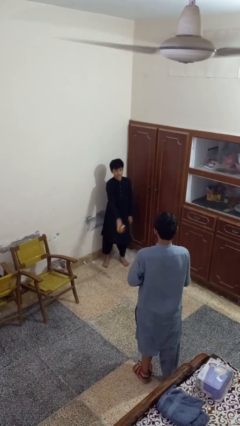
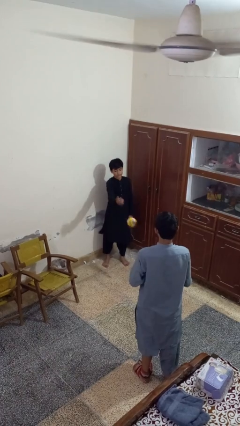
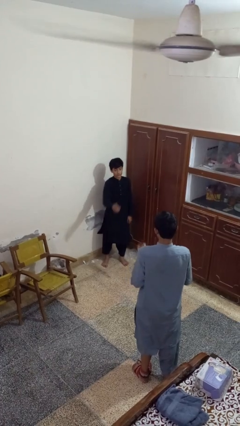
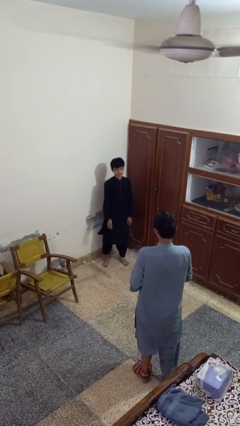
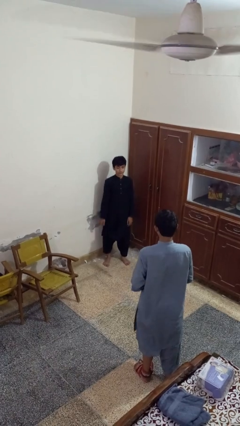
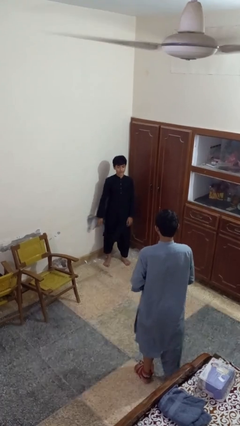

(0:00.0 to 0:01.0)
person throws object to person

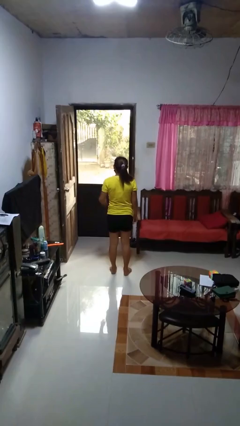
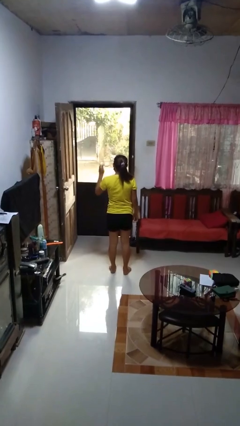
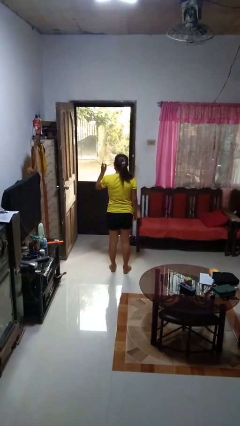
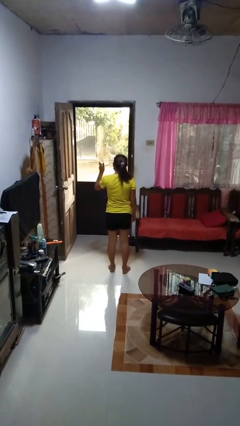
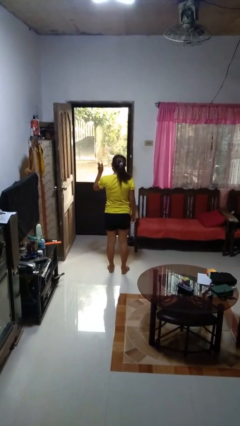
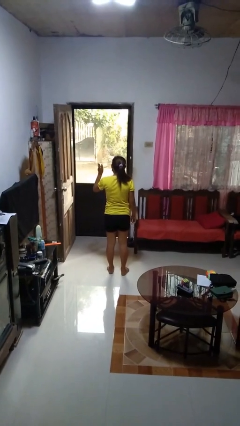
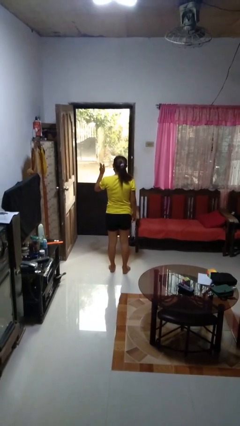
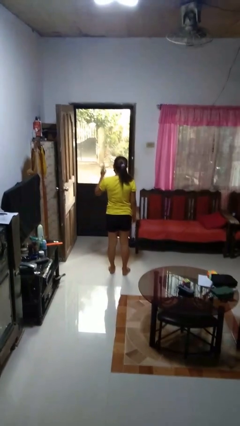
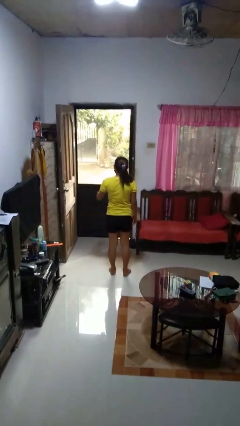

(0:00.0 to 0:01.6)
person gestures number three

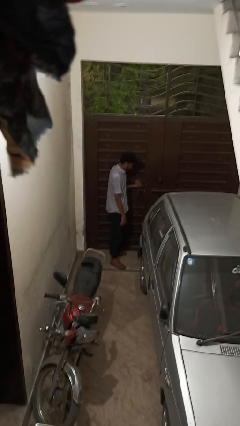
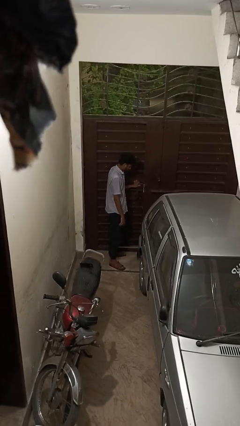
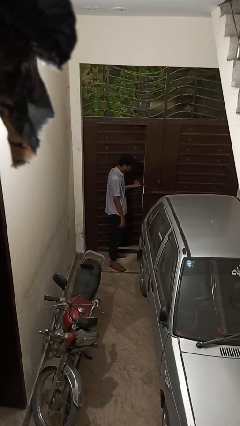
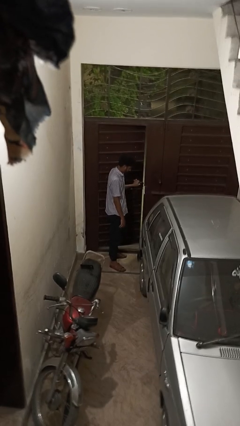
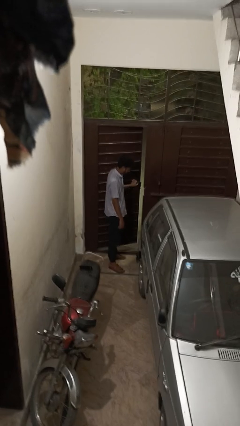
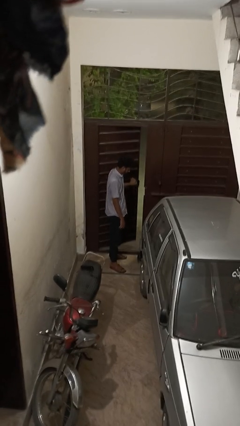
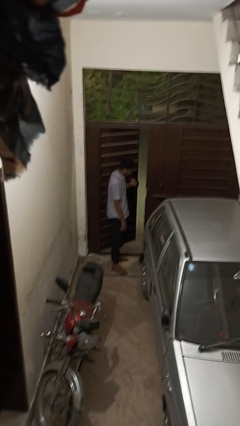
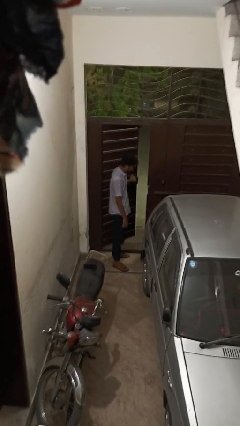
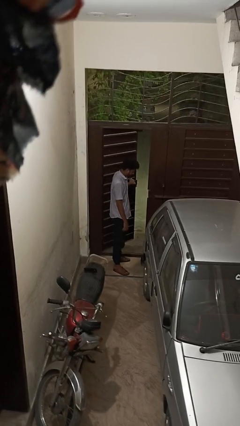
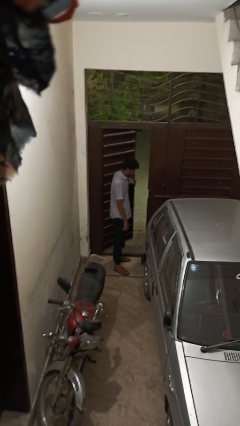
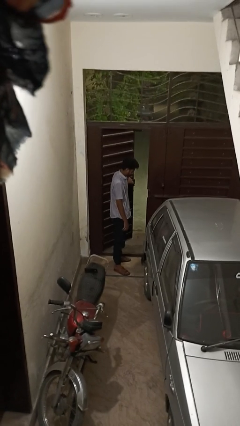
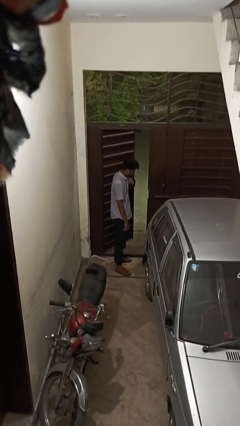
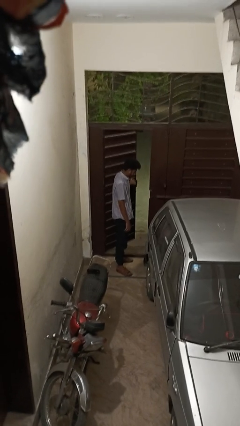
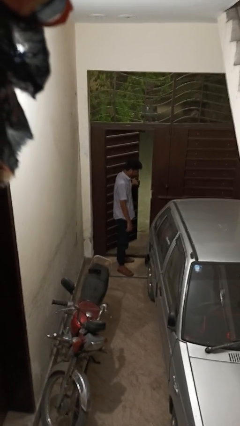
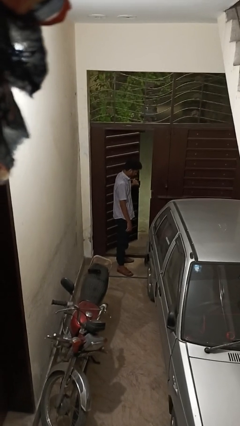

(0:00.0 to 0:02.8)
person opens gate

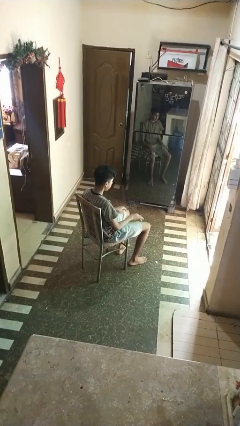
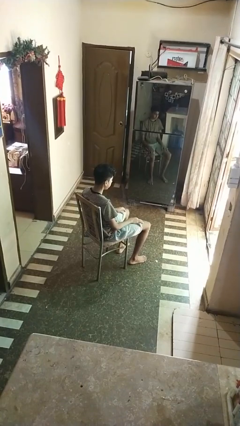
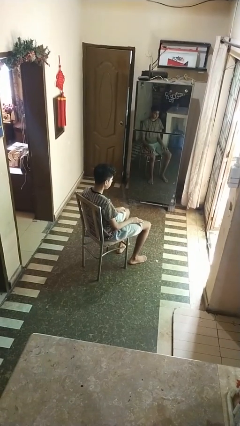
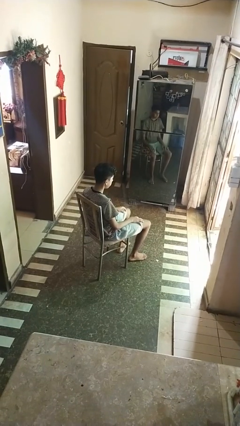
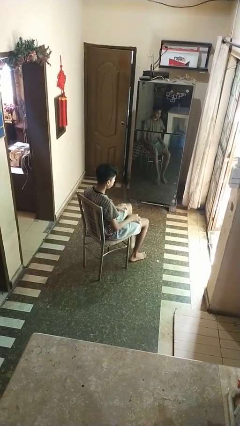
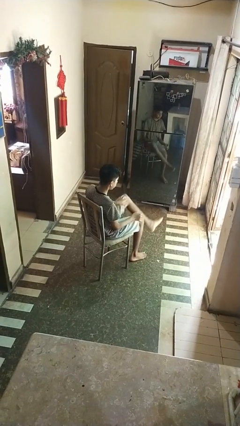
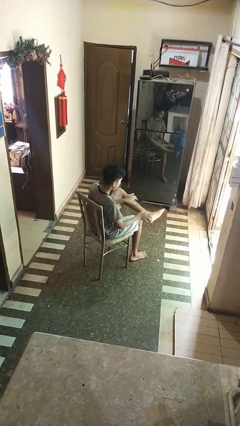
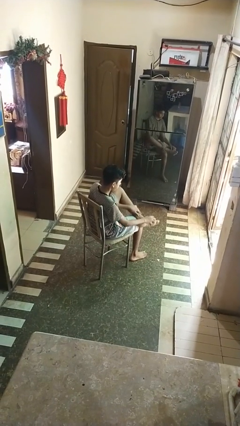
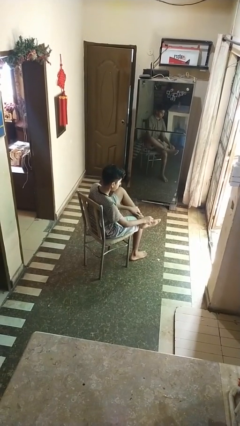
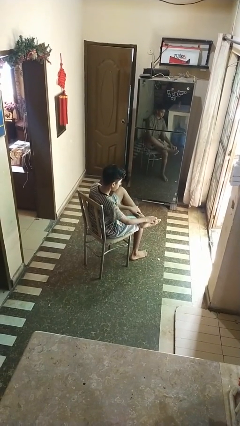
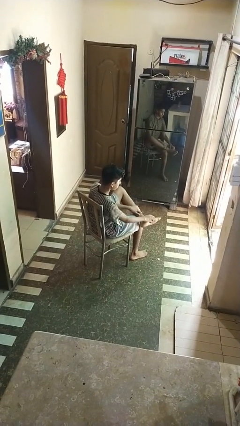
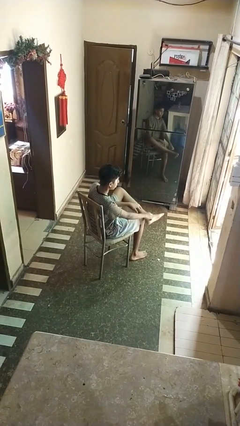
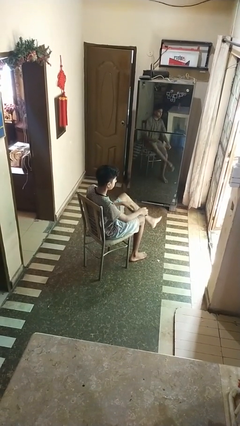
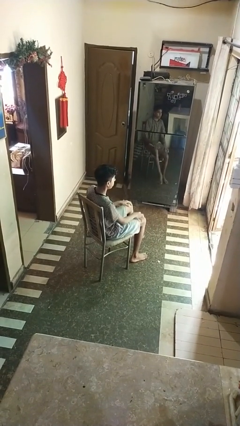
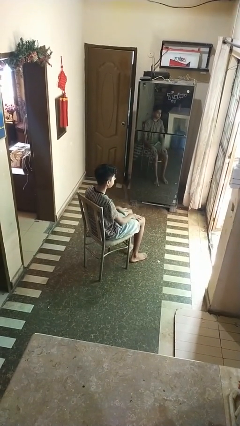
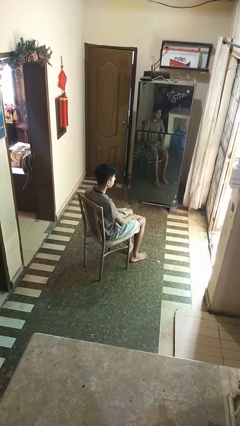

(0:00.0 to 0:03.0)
person rubs foot

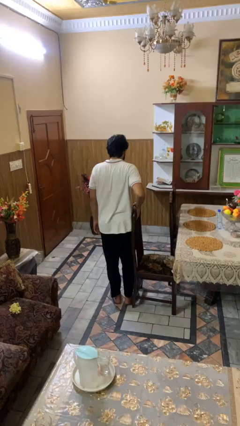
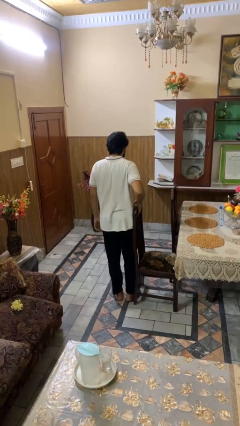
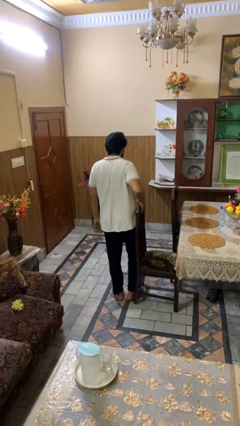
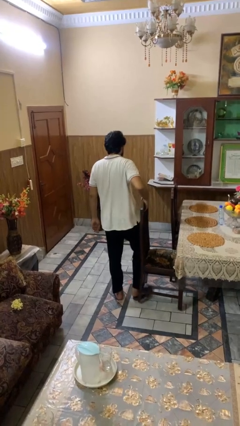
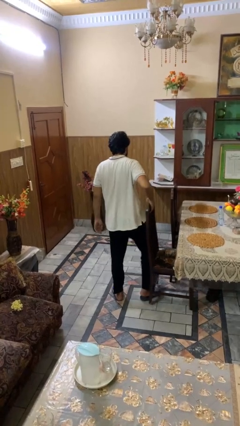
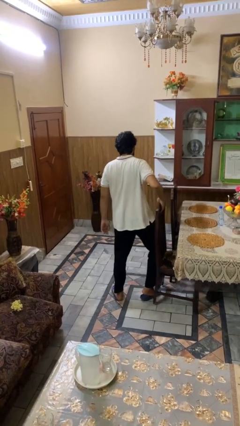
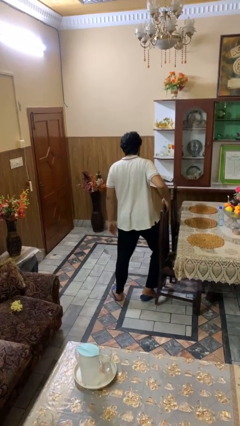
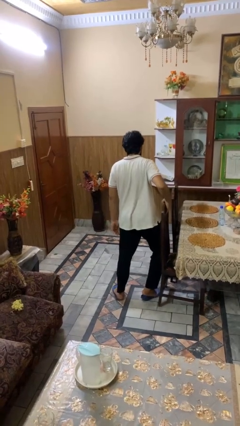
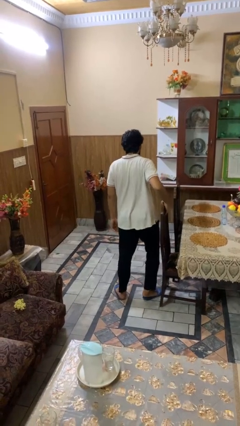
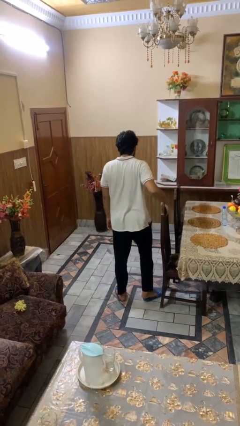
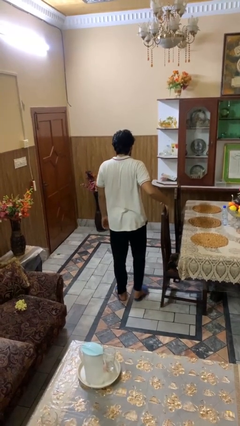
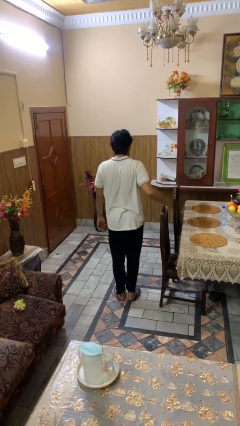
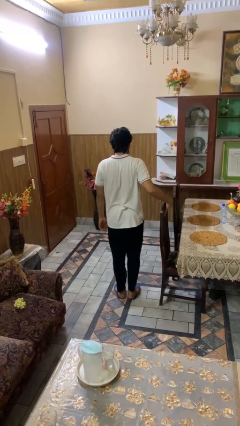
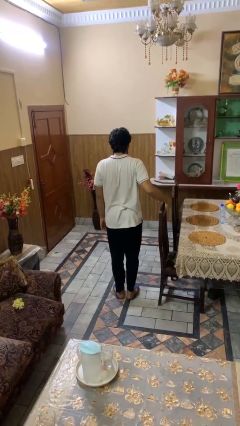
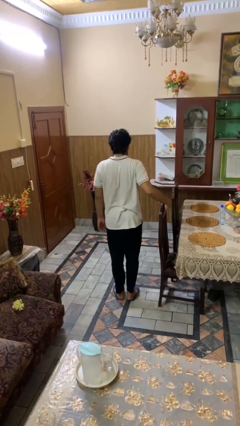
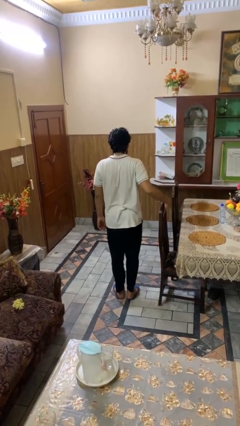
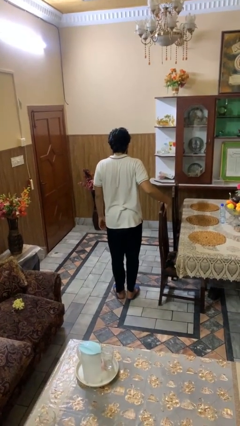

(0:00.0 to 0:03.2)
person pushes in chair

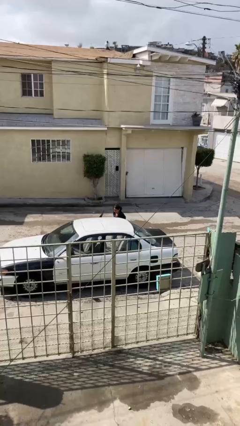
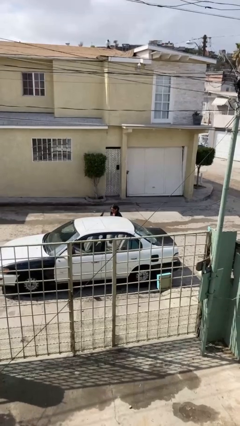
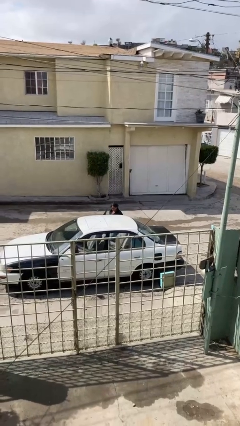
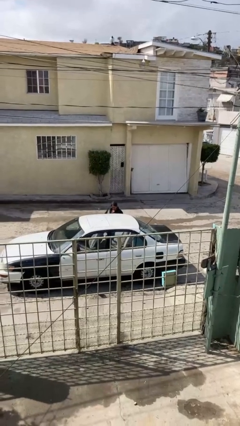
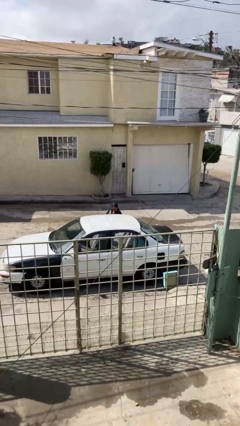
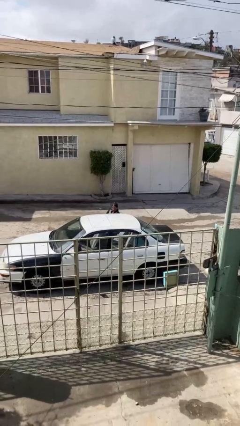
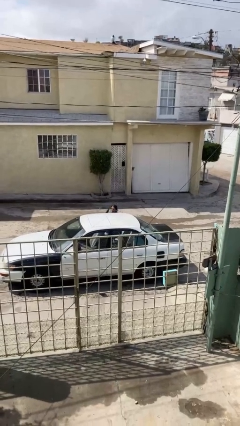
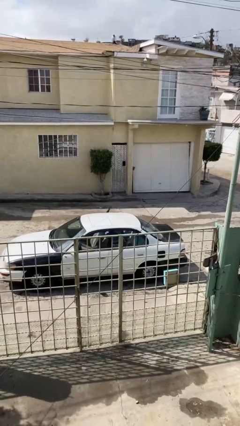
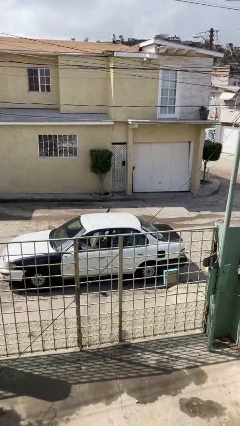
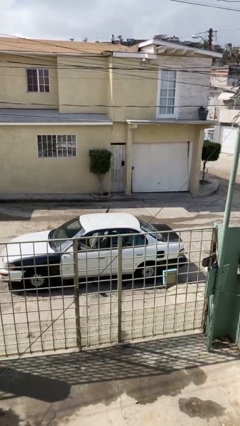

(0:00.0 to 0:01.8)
person enters car

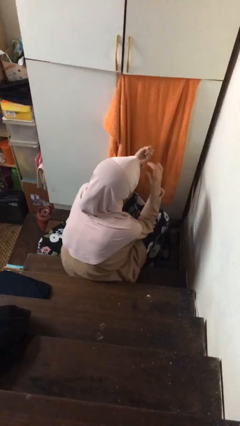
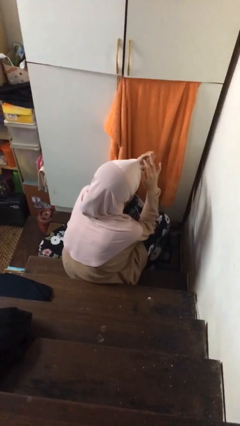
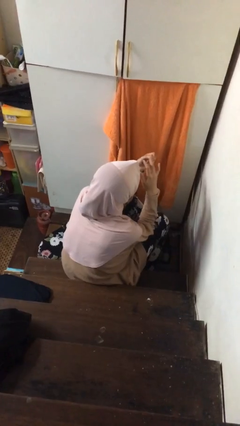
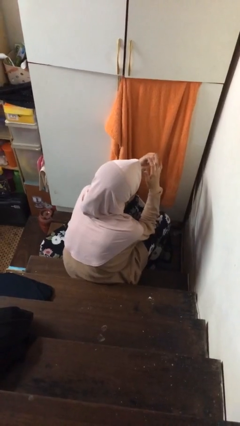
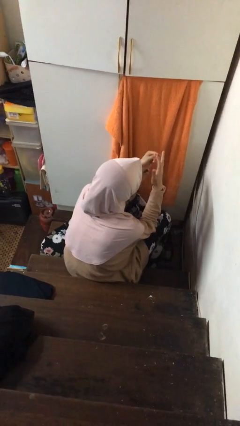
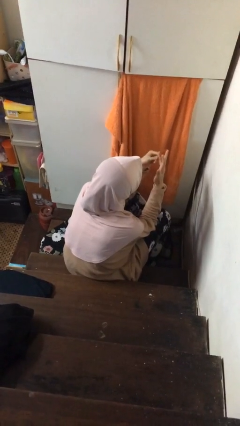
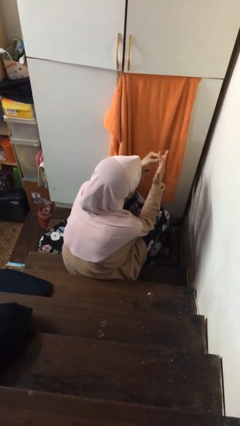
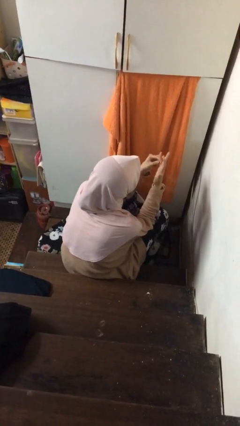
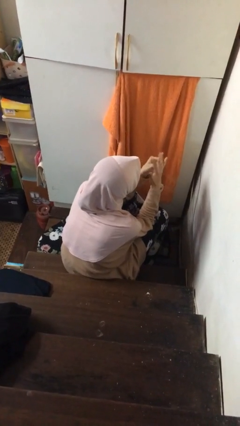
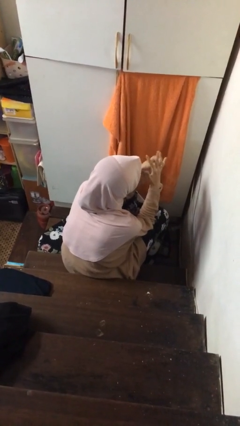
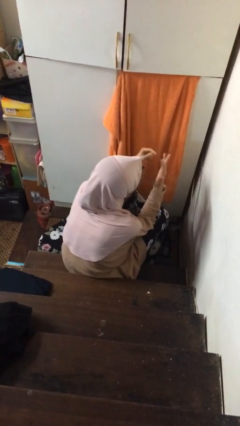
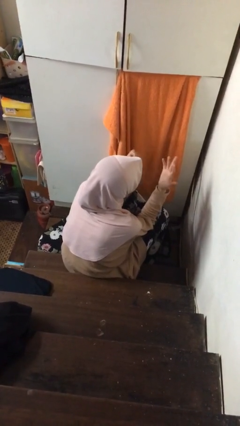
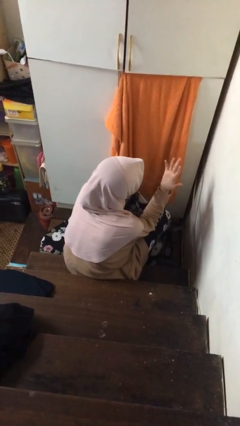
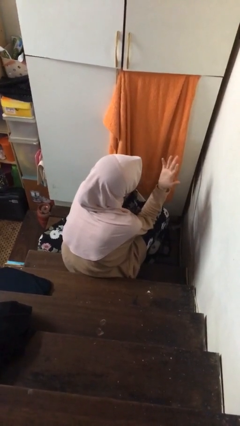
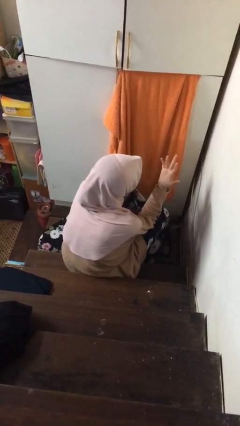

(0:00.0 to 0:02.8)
person puts on ring

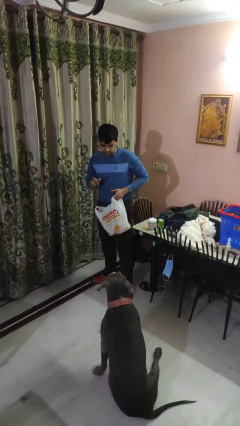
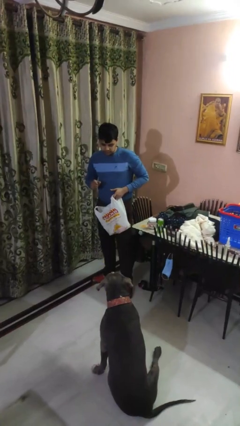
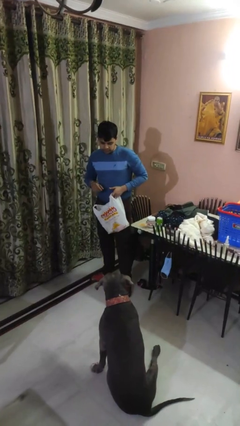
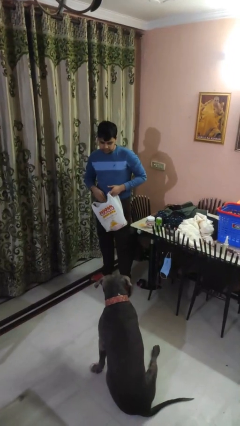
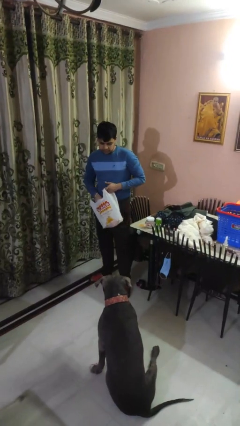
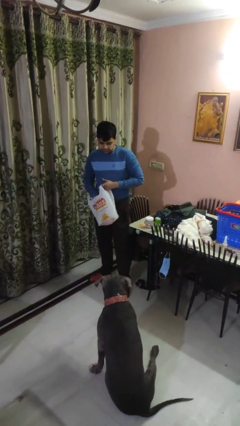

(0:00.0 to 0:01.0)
person throws object to dog
